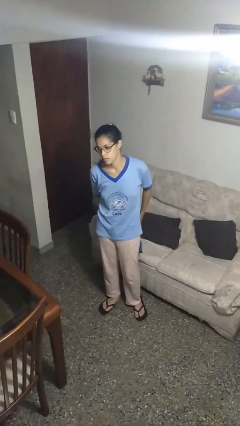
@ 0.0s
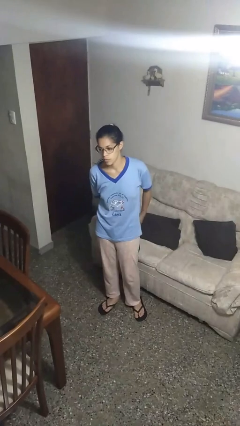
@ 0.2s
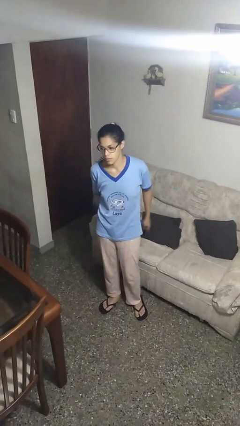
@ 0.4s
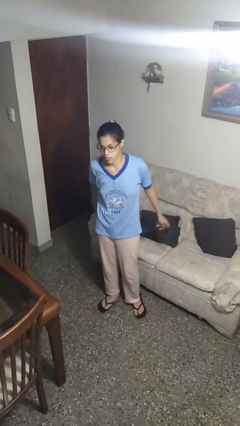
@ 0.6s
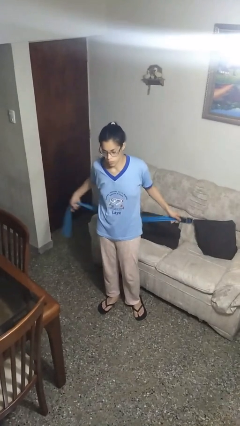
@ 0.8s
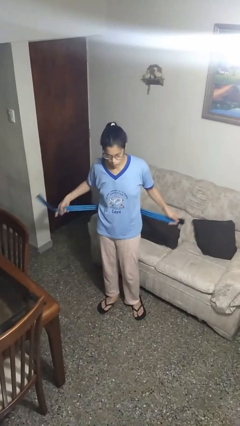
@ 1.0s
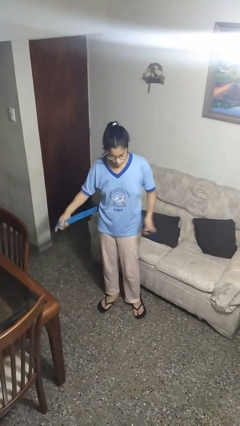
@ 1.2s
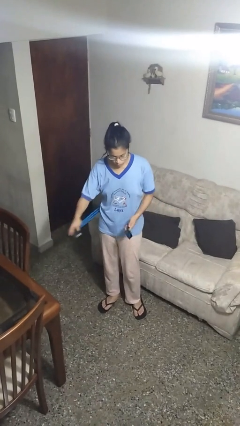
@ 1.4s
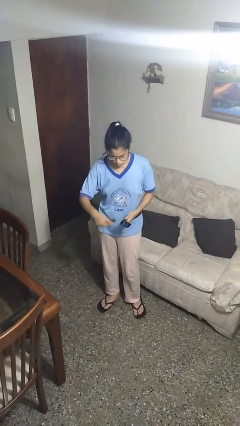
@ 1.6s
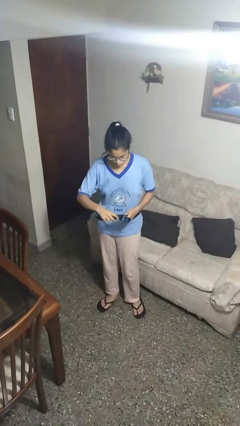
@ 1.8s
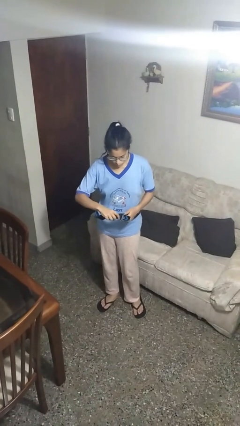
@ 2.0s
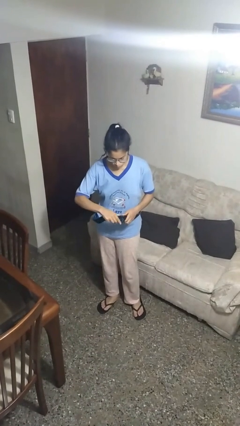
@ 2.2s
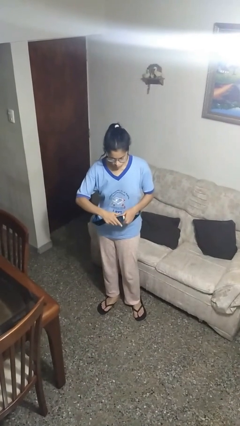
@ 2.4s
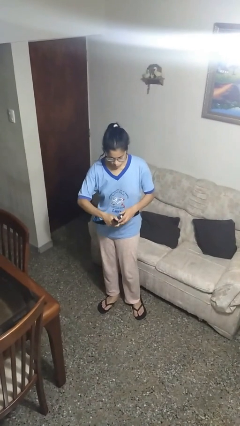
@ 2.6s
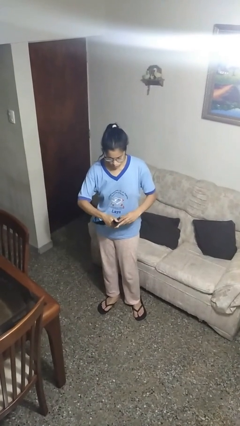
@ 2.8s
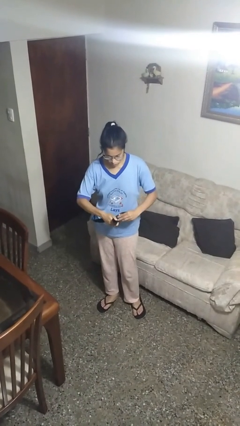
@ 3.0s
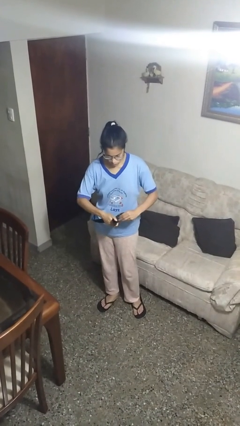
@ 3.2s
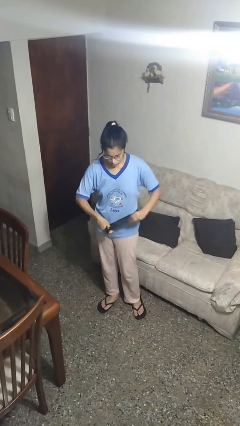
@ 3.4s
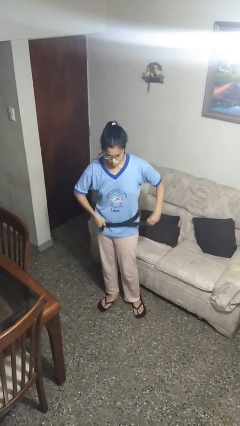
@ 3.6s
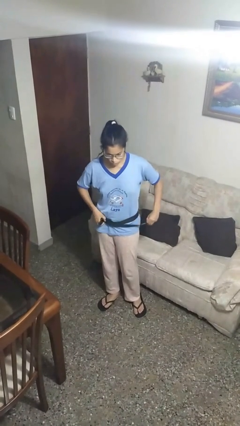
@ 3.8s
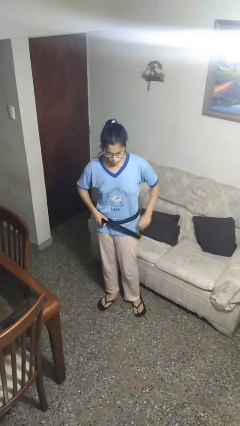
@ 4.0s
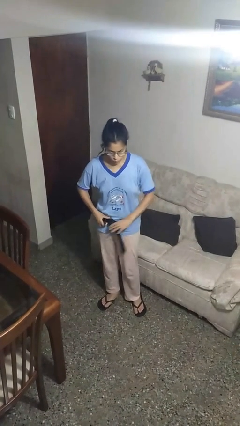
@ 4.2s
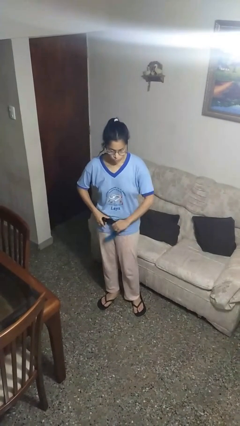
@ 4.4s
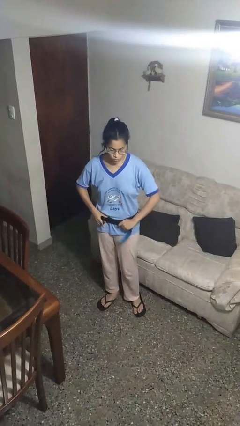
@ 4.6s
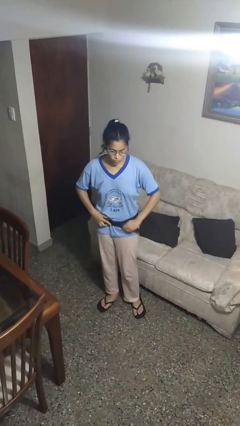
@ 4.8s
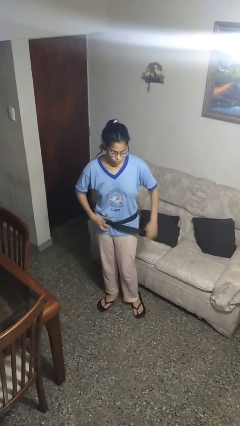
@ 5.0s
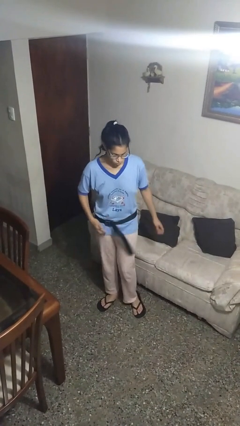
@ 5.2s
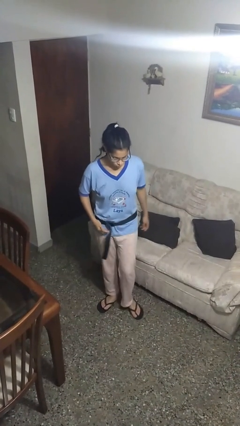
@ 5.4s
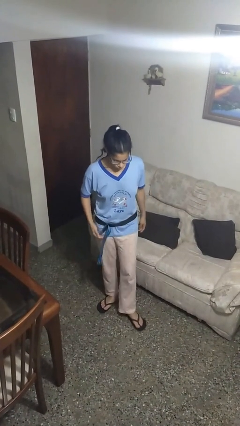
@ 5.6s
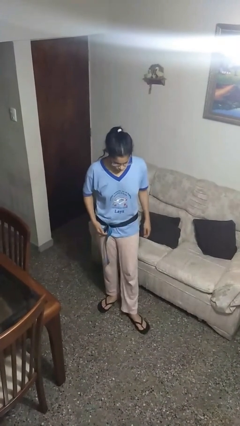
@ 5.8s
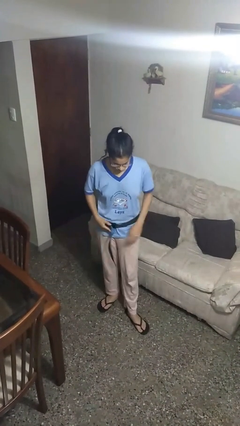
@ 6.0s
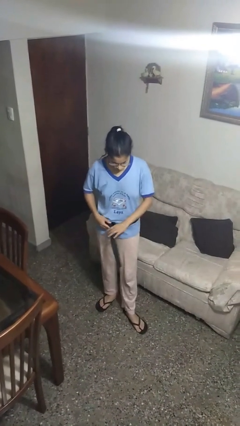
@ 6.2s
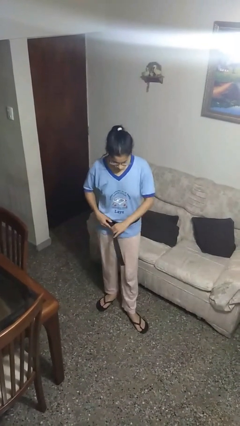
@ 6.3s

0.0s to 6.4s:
person puts on belt

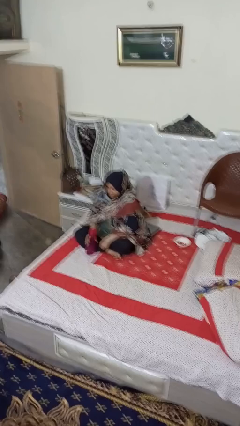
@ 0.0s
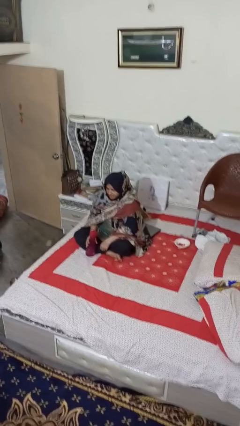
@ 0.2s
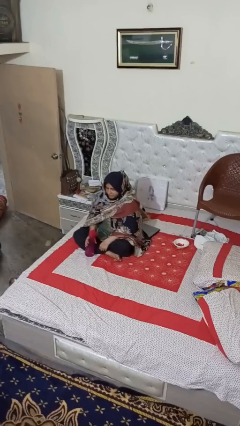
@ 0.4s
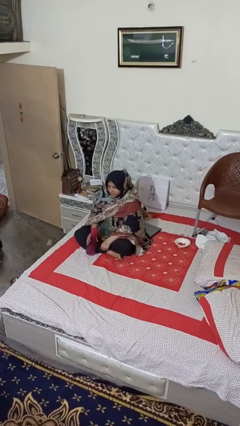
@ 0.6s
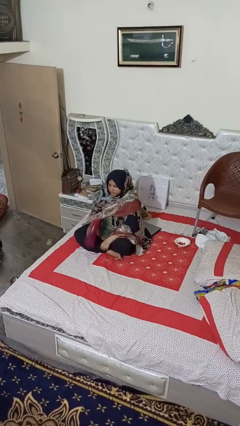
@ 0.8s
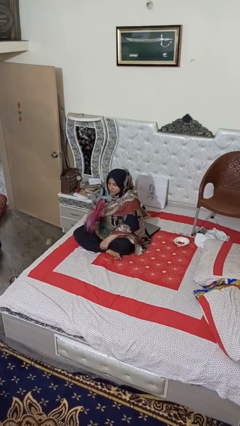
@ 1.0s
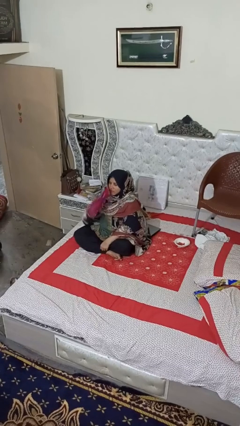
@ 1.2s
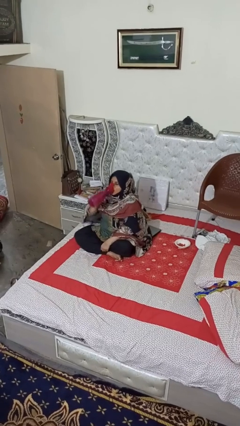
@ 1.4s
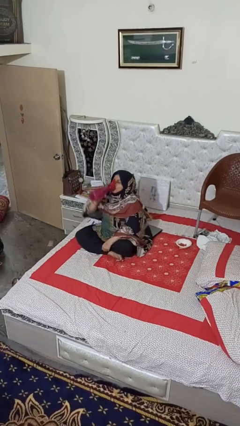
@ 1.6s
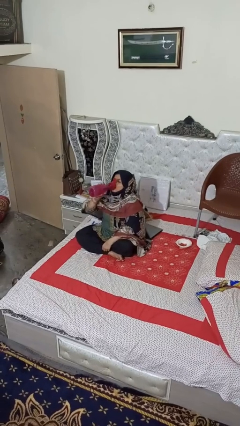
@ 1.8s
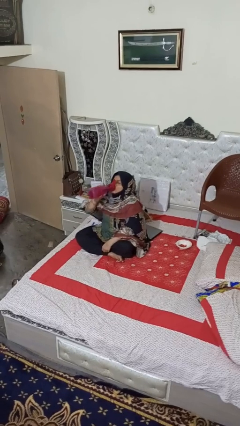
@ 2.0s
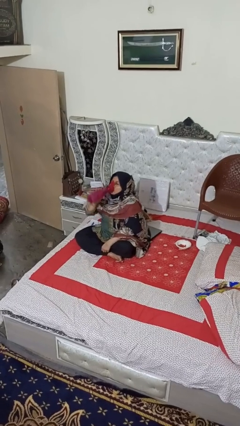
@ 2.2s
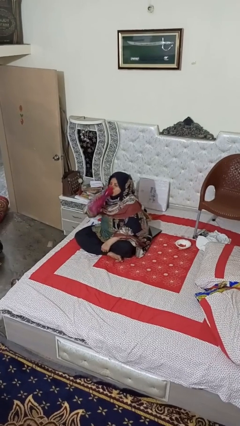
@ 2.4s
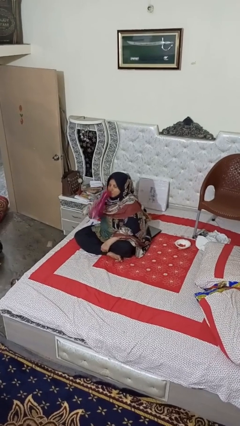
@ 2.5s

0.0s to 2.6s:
person drinks from bottle

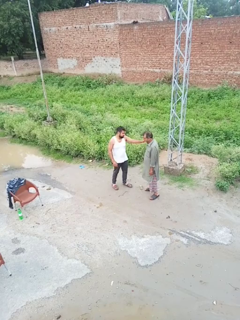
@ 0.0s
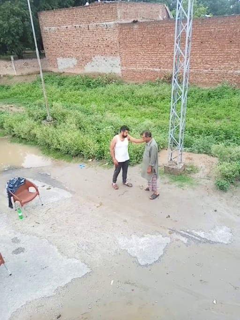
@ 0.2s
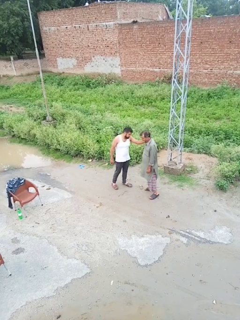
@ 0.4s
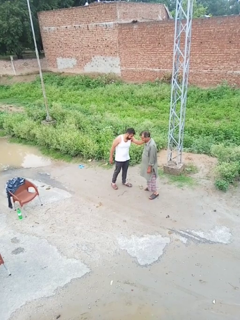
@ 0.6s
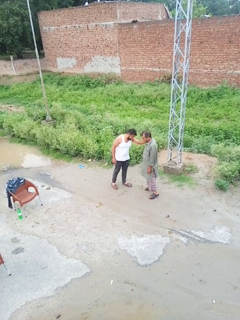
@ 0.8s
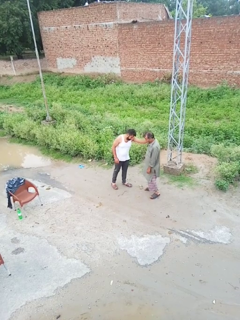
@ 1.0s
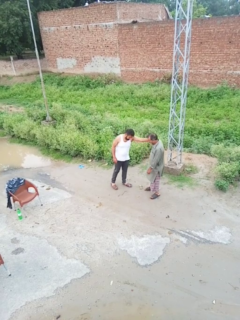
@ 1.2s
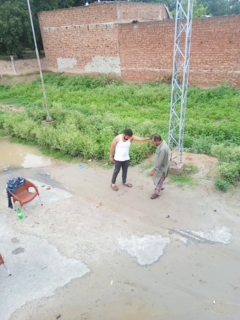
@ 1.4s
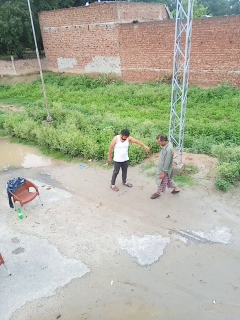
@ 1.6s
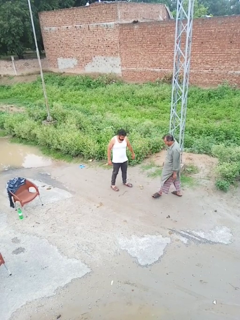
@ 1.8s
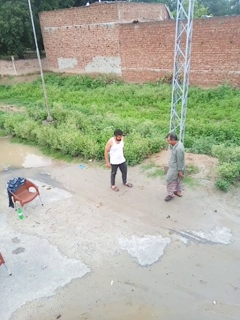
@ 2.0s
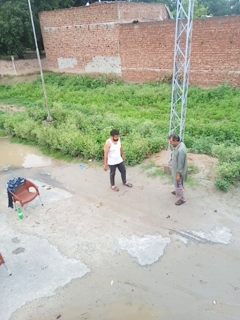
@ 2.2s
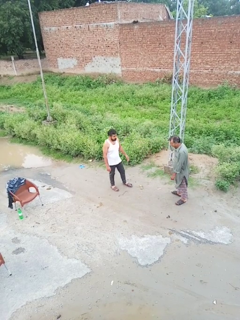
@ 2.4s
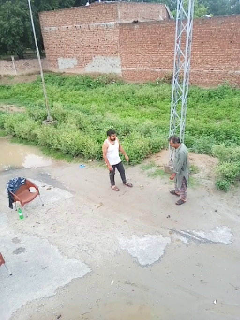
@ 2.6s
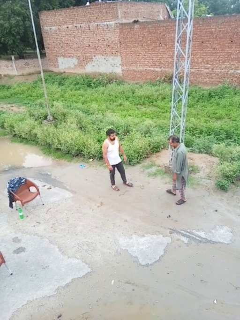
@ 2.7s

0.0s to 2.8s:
person shoves person

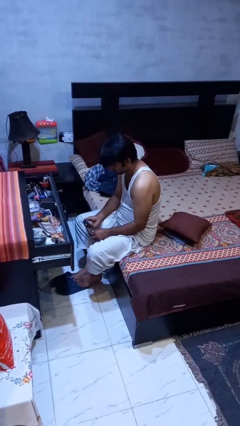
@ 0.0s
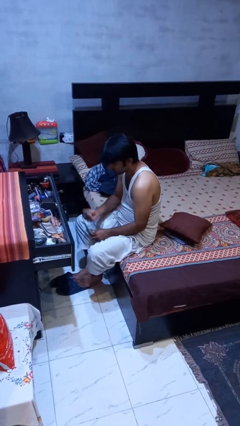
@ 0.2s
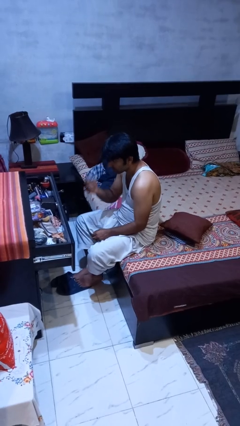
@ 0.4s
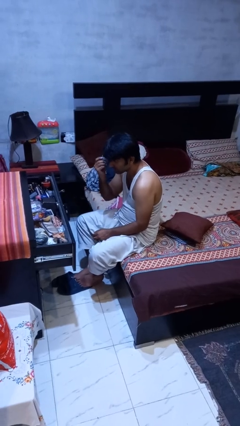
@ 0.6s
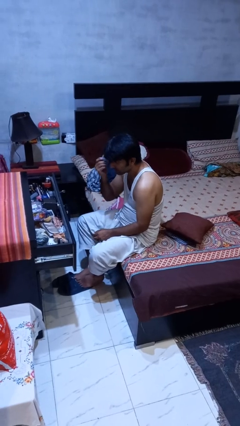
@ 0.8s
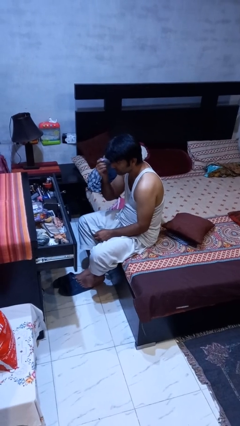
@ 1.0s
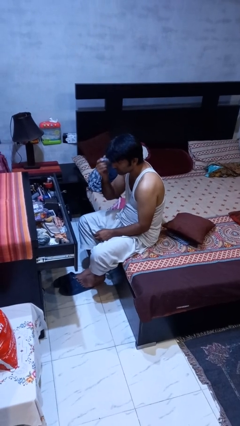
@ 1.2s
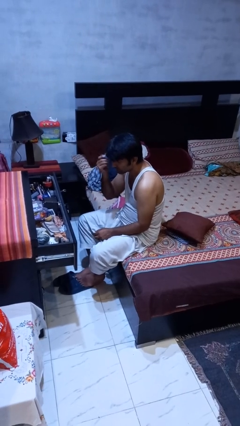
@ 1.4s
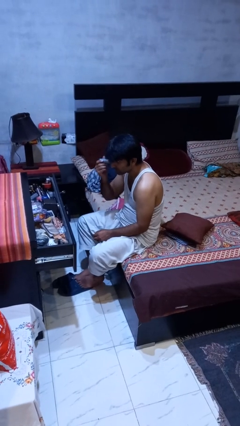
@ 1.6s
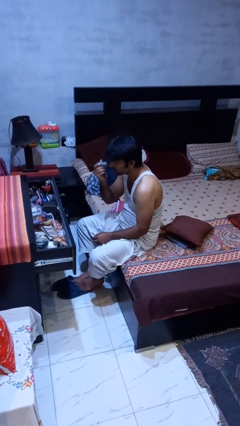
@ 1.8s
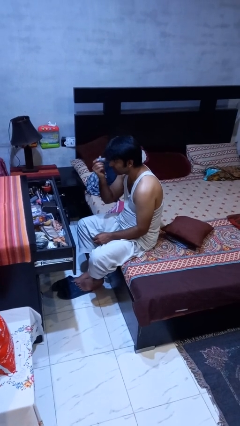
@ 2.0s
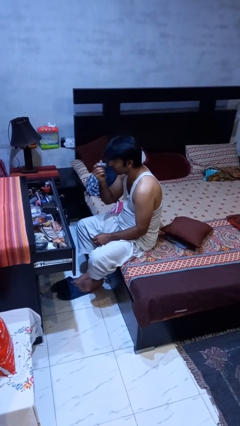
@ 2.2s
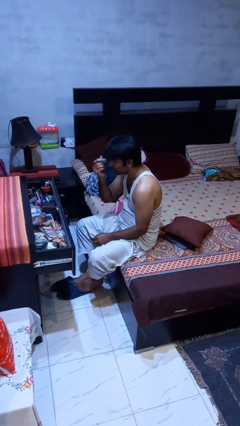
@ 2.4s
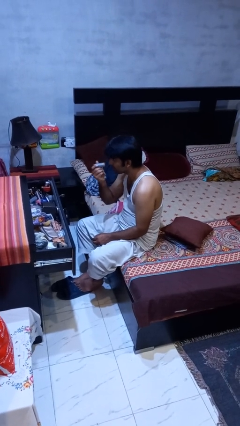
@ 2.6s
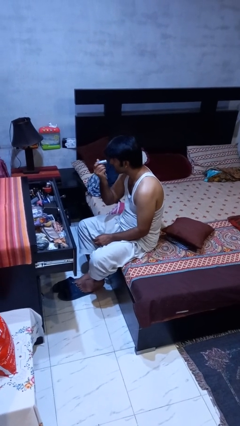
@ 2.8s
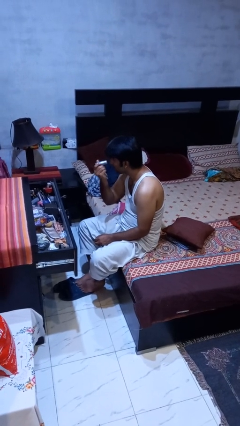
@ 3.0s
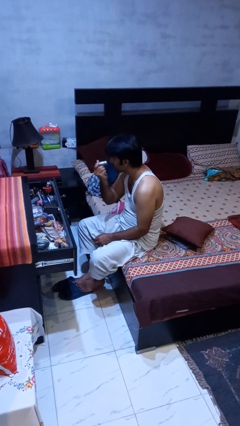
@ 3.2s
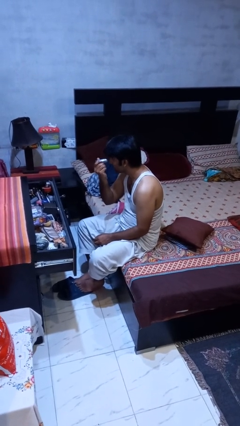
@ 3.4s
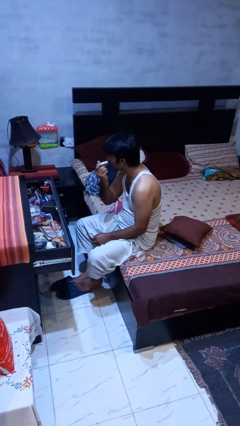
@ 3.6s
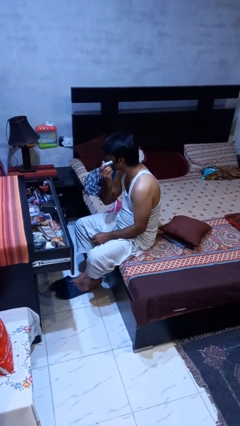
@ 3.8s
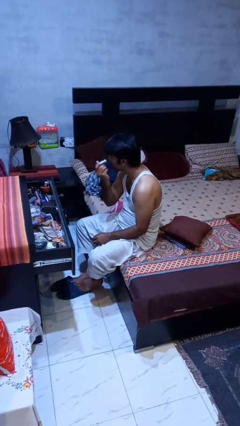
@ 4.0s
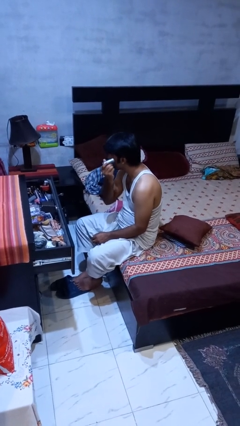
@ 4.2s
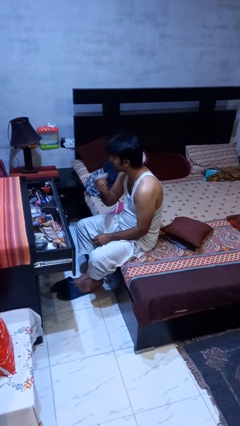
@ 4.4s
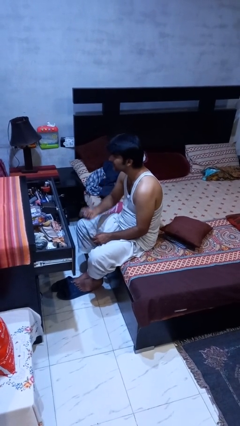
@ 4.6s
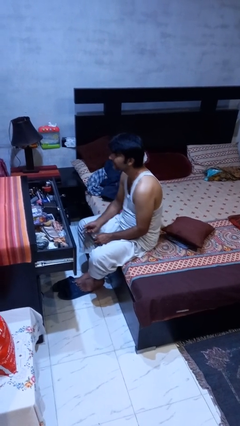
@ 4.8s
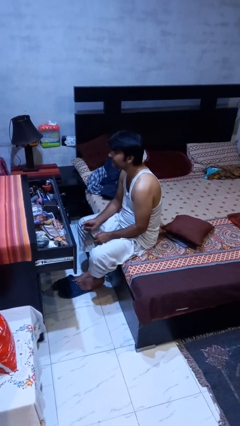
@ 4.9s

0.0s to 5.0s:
person applies foundation makeup

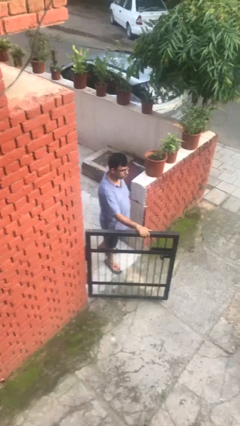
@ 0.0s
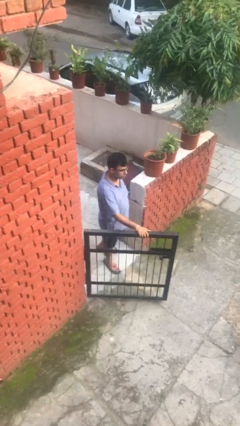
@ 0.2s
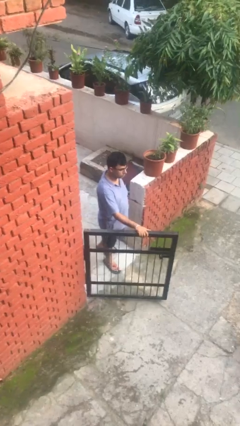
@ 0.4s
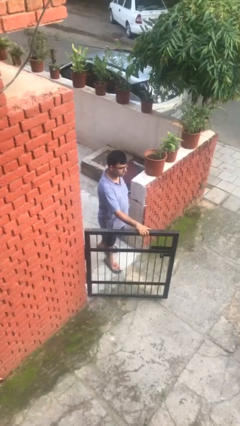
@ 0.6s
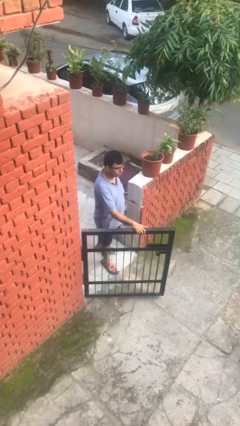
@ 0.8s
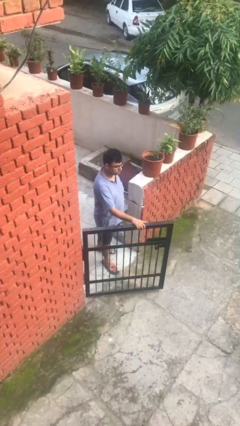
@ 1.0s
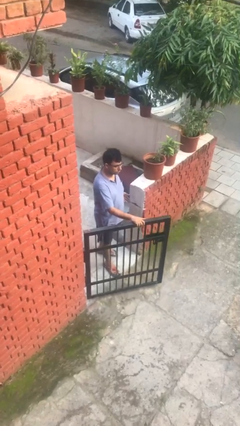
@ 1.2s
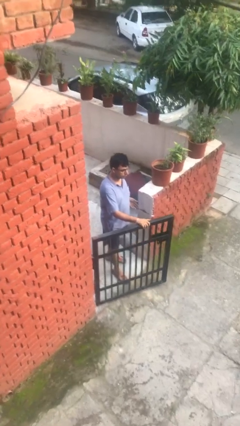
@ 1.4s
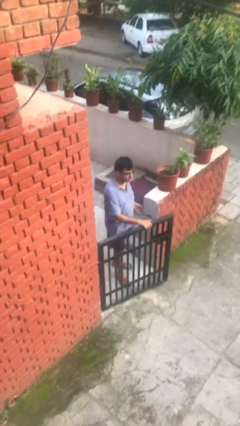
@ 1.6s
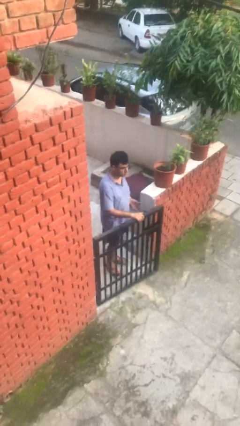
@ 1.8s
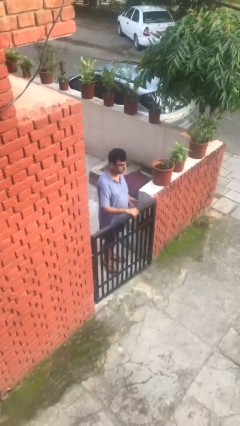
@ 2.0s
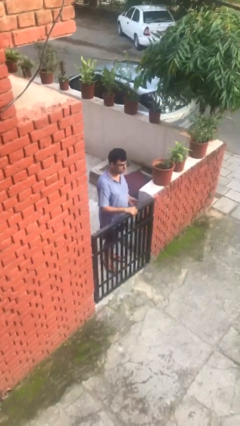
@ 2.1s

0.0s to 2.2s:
person closes gate
